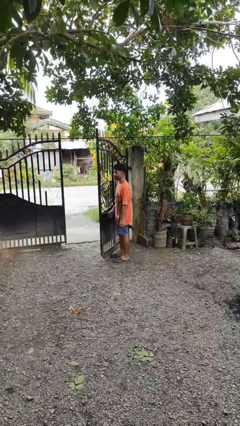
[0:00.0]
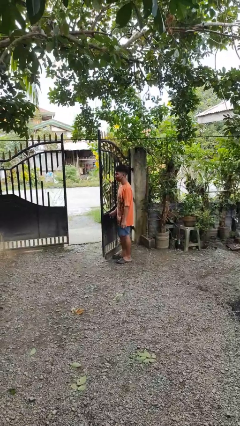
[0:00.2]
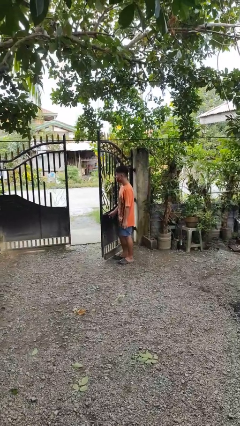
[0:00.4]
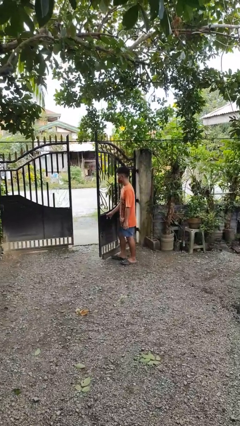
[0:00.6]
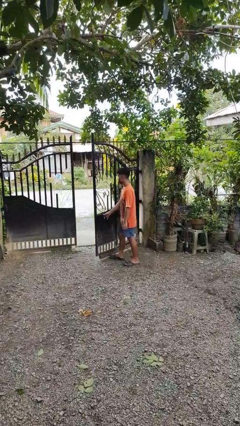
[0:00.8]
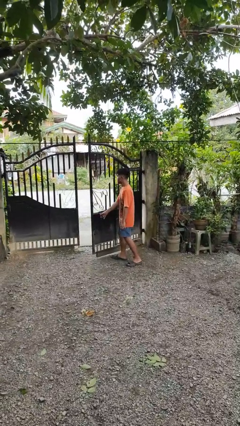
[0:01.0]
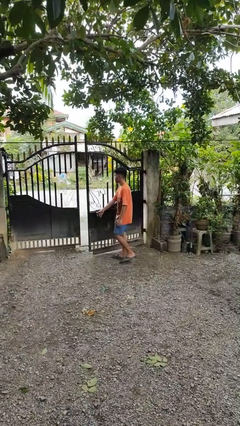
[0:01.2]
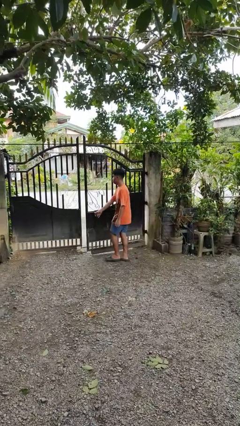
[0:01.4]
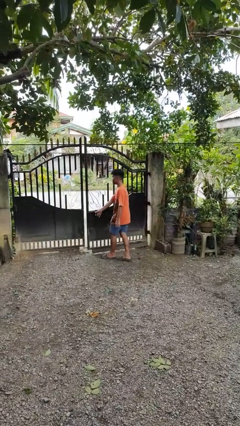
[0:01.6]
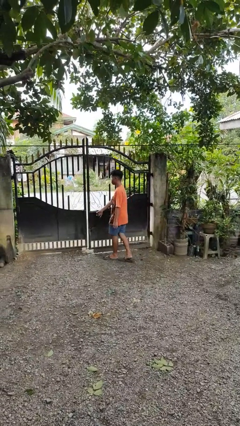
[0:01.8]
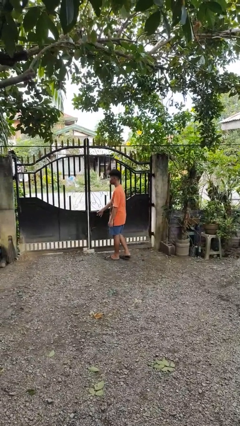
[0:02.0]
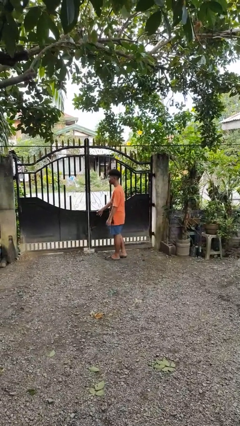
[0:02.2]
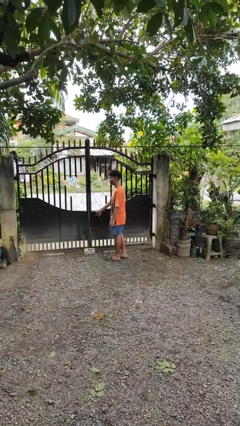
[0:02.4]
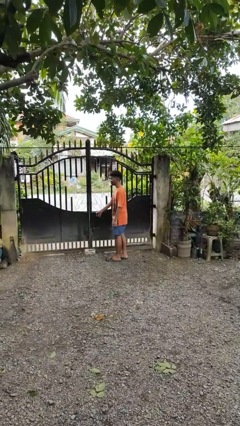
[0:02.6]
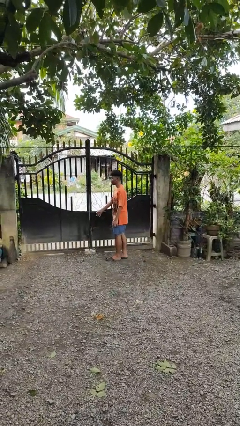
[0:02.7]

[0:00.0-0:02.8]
person closes gate

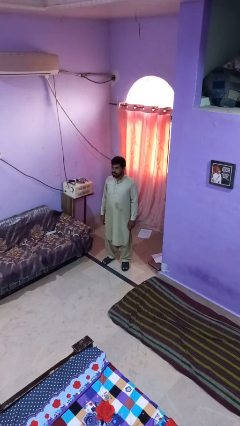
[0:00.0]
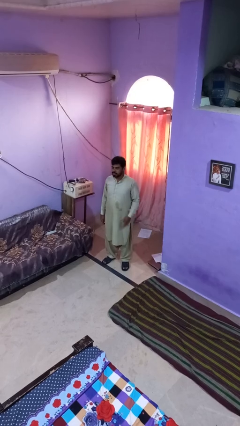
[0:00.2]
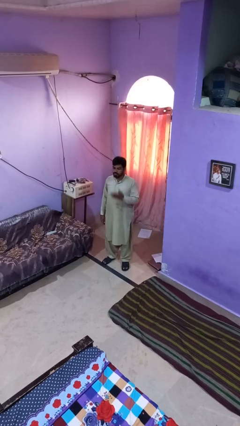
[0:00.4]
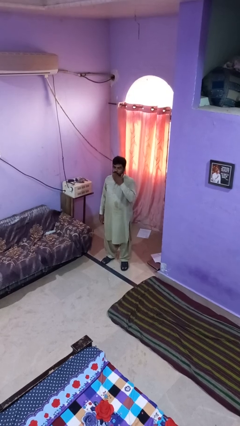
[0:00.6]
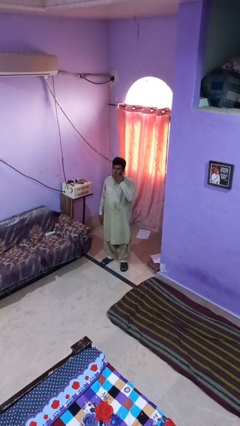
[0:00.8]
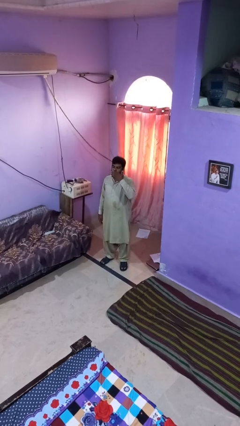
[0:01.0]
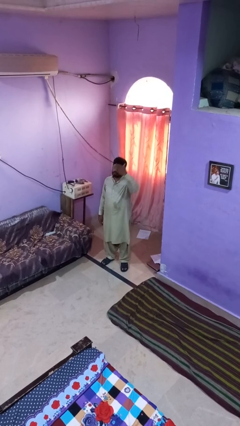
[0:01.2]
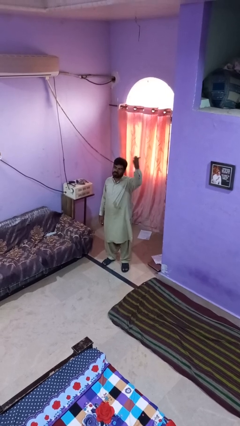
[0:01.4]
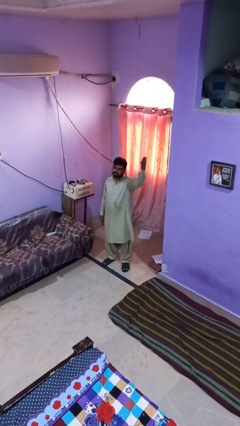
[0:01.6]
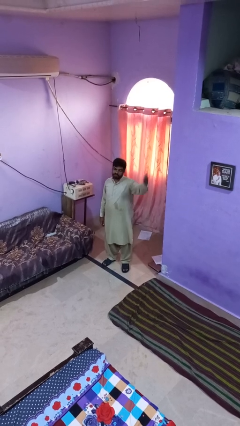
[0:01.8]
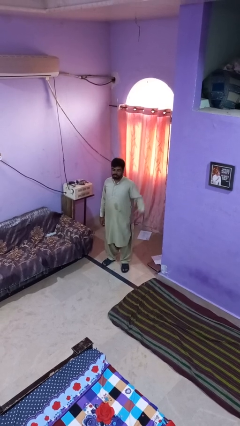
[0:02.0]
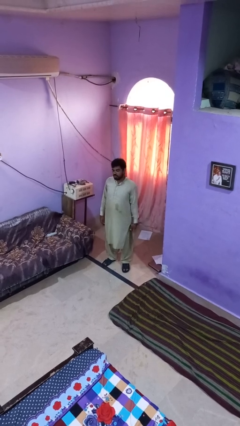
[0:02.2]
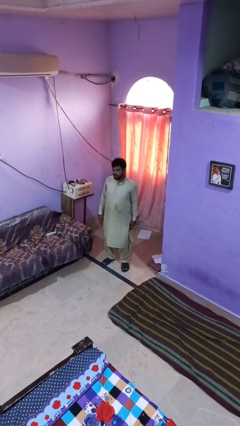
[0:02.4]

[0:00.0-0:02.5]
person gestures blow kiss

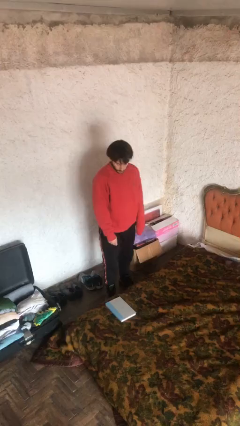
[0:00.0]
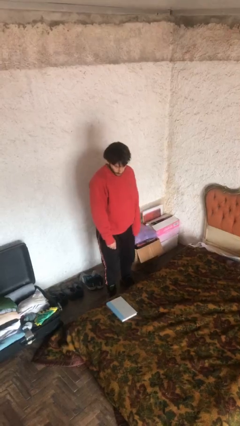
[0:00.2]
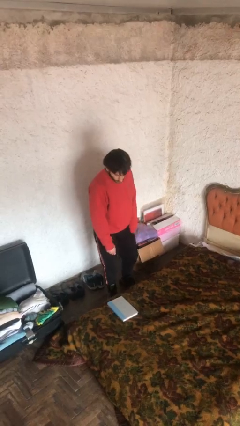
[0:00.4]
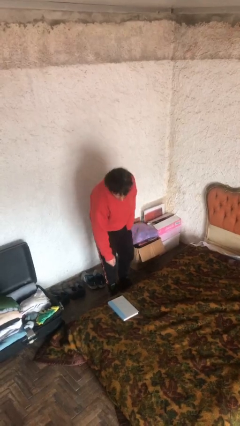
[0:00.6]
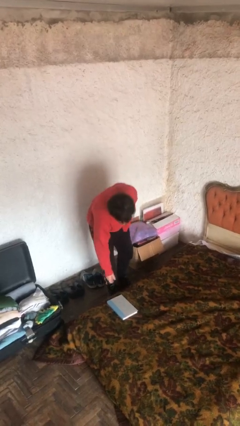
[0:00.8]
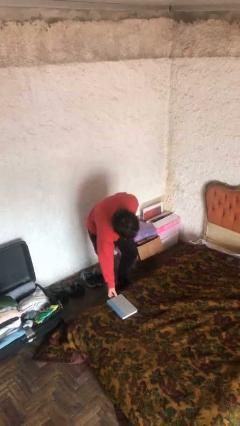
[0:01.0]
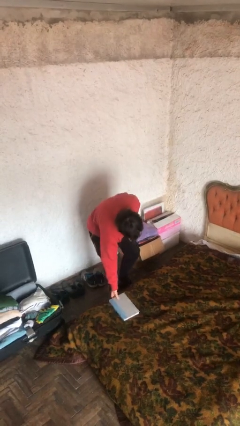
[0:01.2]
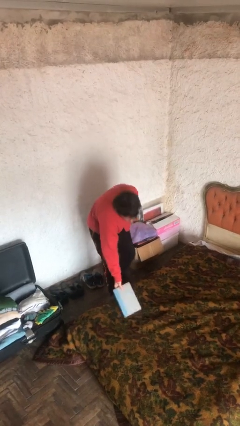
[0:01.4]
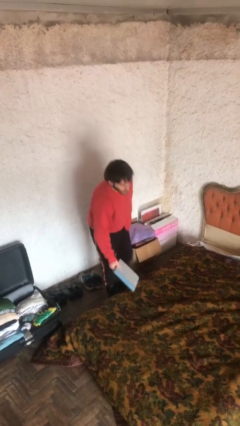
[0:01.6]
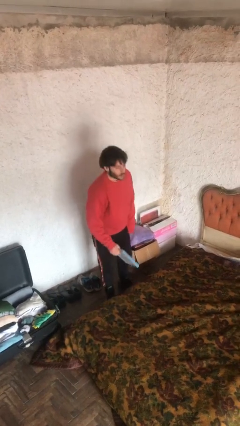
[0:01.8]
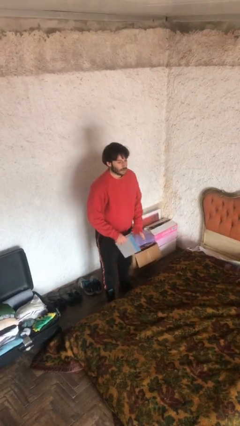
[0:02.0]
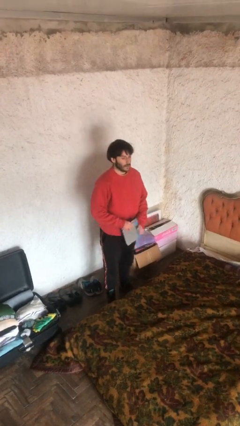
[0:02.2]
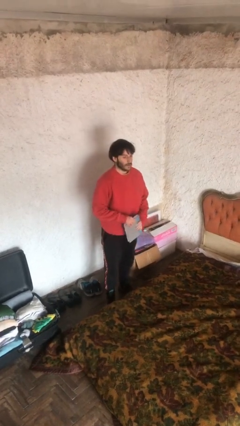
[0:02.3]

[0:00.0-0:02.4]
person picks up object from bed

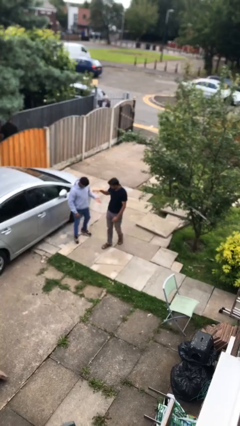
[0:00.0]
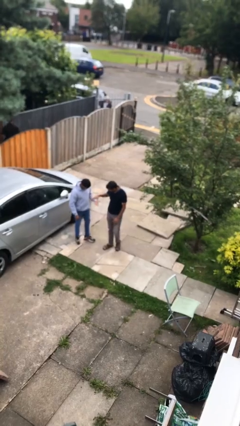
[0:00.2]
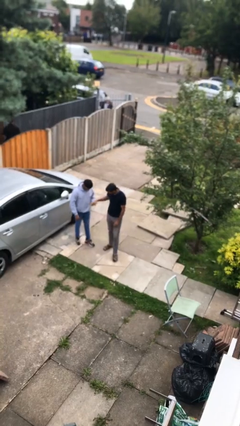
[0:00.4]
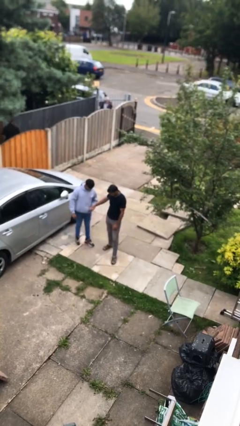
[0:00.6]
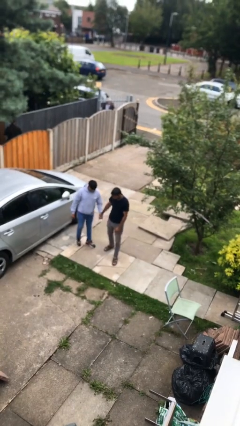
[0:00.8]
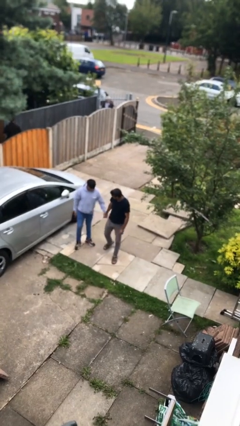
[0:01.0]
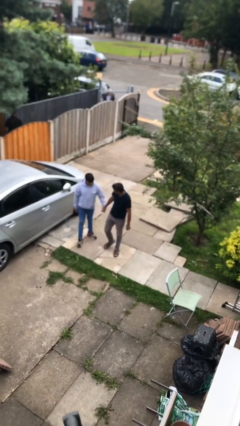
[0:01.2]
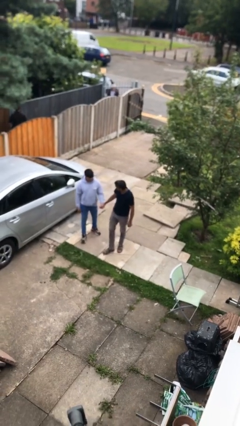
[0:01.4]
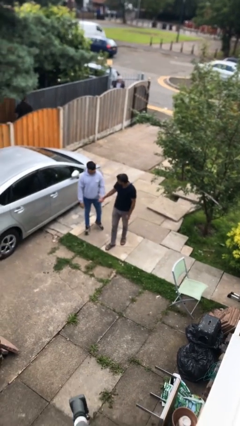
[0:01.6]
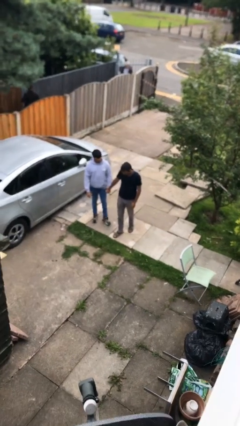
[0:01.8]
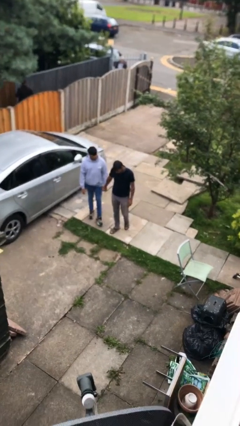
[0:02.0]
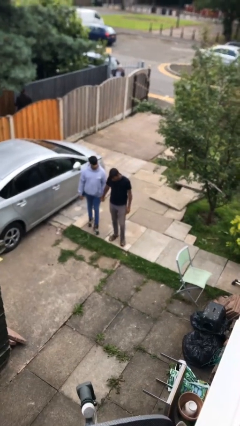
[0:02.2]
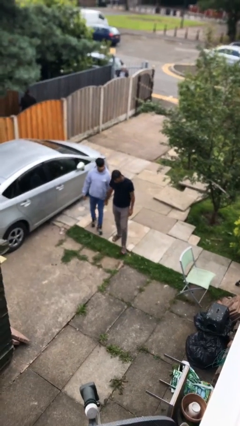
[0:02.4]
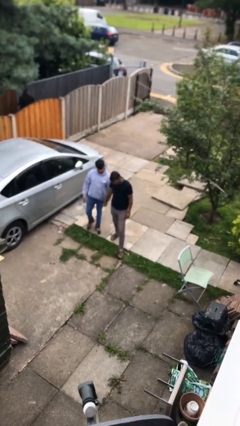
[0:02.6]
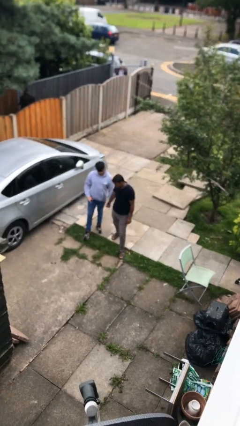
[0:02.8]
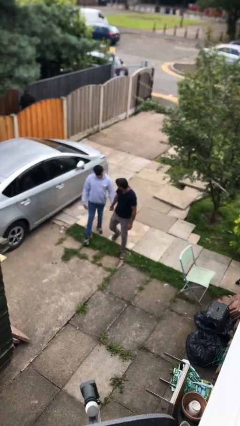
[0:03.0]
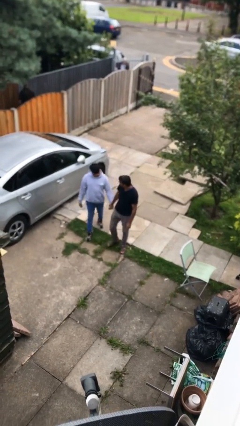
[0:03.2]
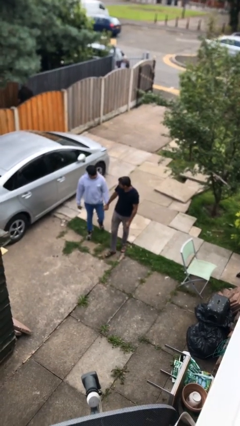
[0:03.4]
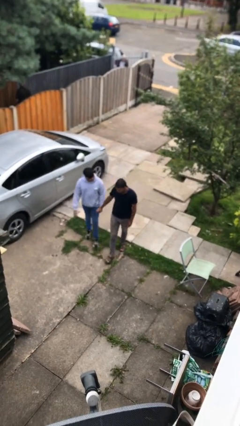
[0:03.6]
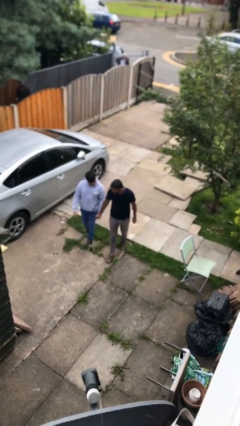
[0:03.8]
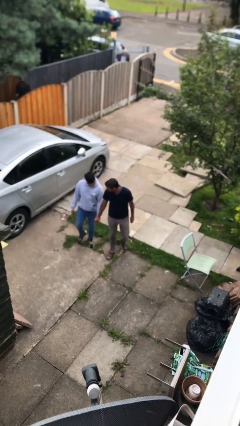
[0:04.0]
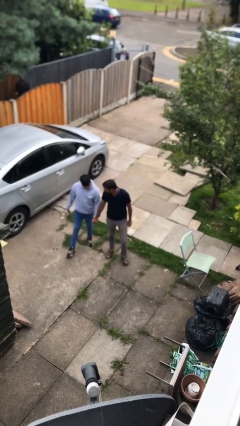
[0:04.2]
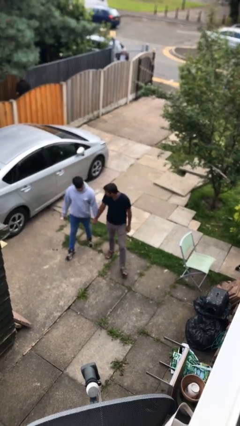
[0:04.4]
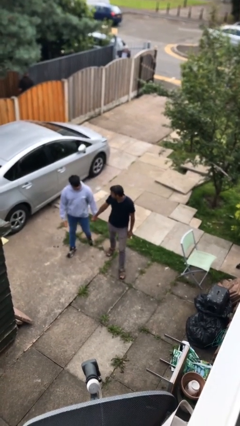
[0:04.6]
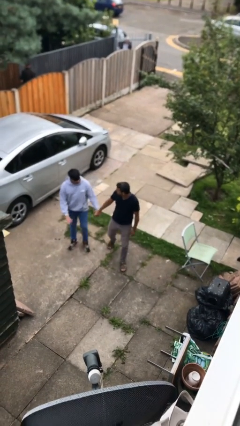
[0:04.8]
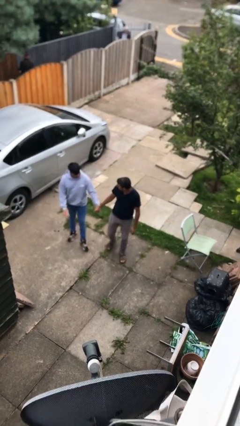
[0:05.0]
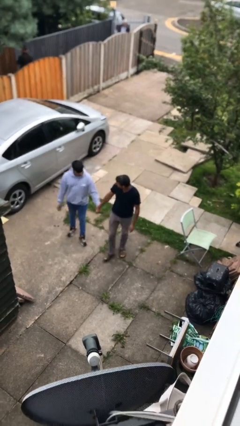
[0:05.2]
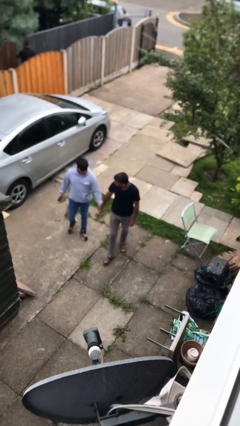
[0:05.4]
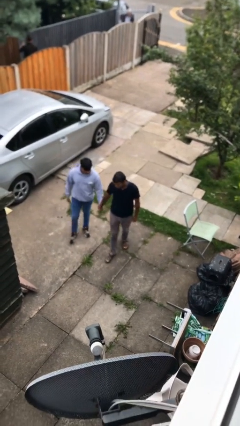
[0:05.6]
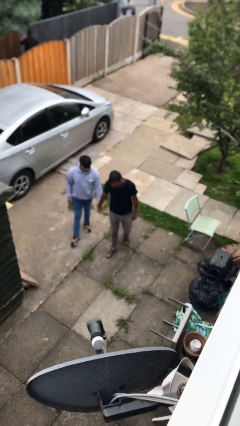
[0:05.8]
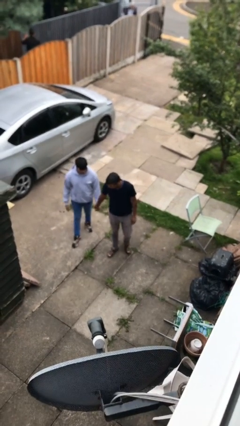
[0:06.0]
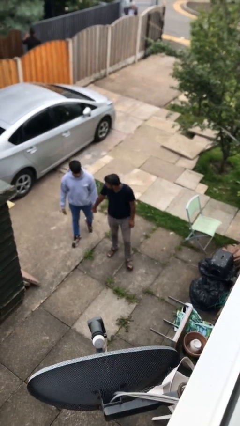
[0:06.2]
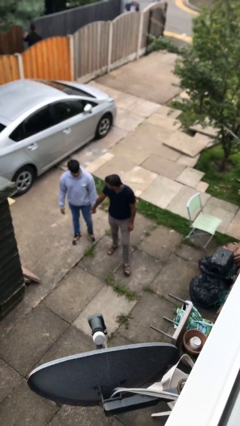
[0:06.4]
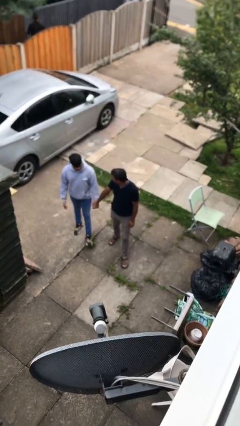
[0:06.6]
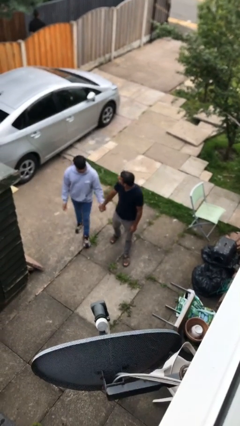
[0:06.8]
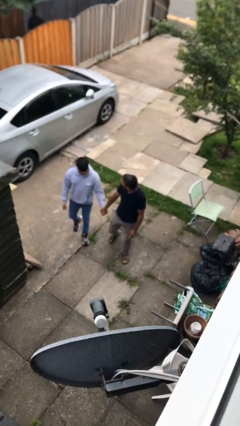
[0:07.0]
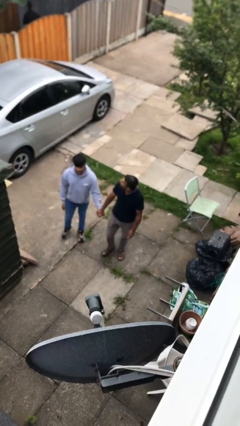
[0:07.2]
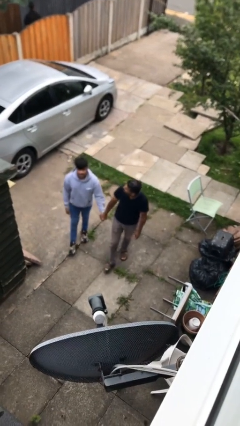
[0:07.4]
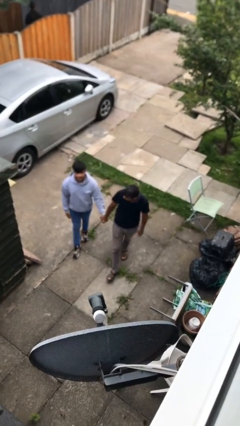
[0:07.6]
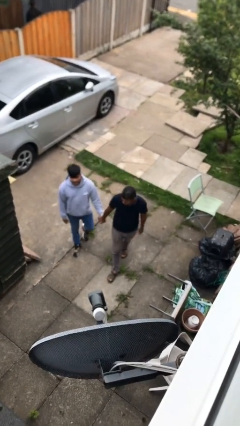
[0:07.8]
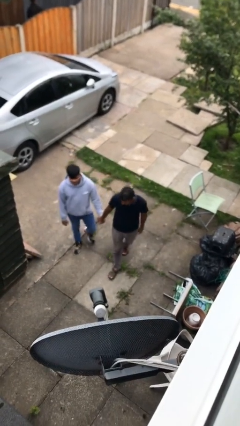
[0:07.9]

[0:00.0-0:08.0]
person holds hand

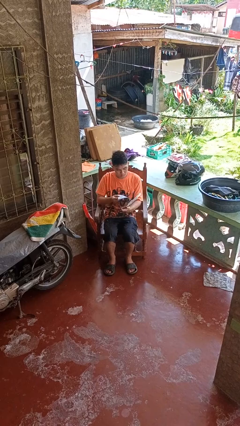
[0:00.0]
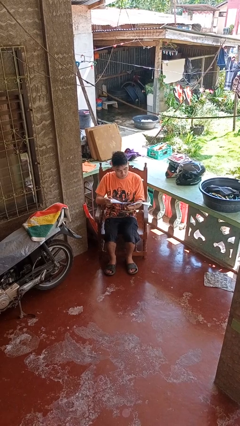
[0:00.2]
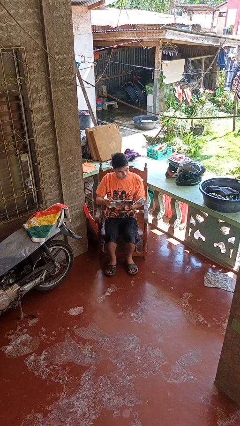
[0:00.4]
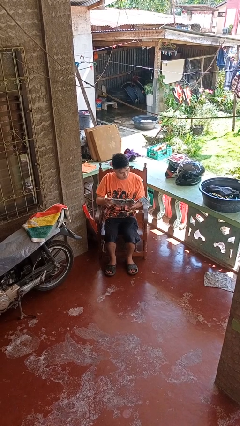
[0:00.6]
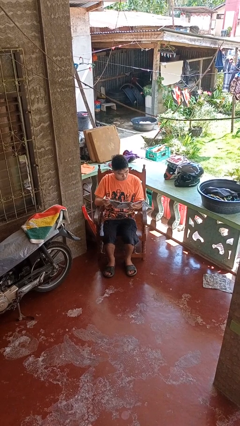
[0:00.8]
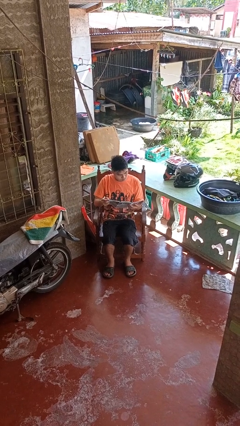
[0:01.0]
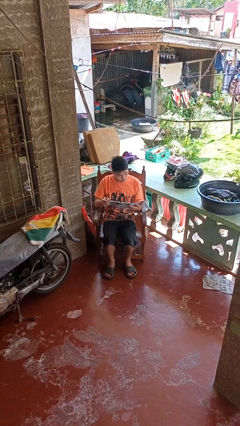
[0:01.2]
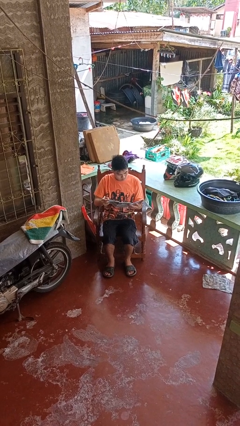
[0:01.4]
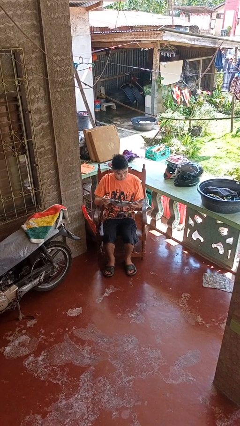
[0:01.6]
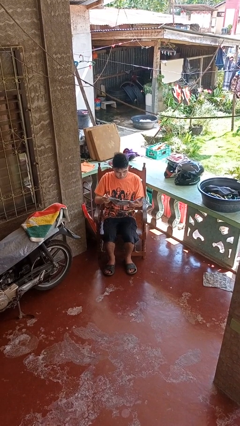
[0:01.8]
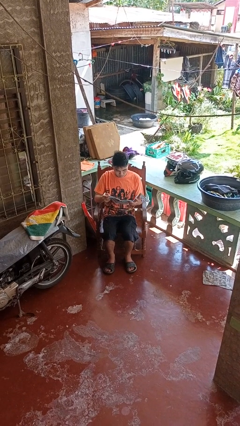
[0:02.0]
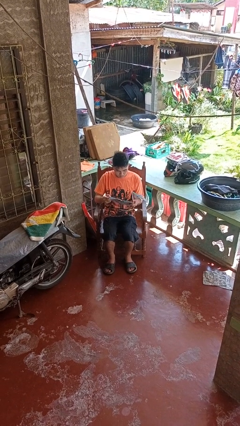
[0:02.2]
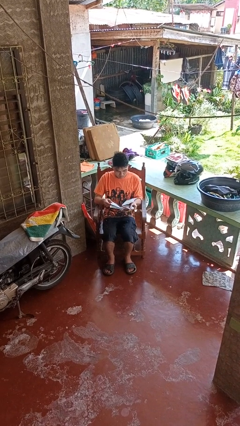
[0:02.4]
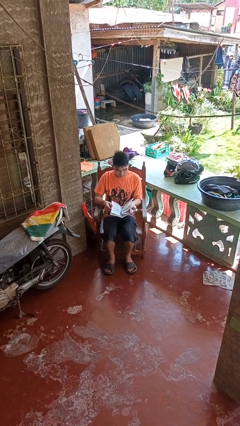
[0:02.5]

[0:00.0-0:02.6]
person reads newspaper
